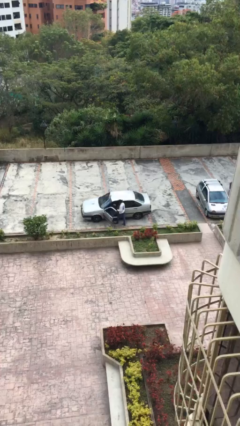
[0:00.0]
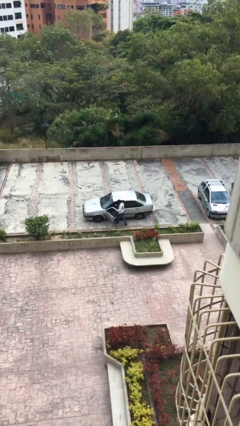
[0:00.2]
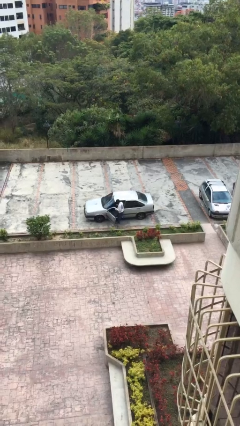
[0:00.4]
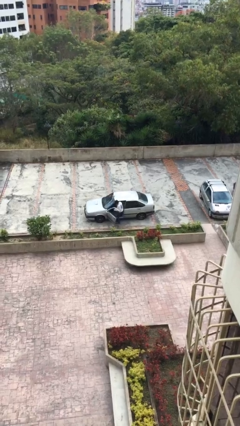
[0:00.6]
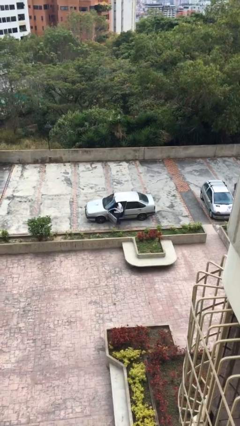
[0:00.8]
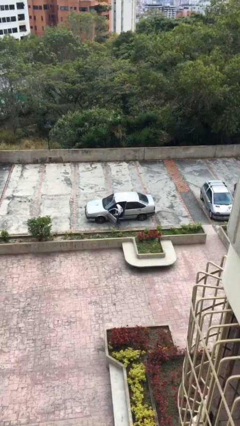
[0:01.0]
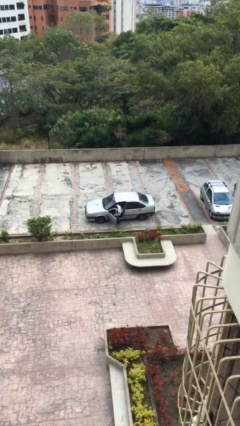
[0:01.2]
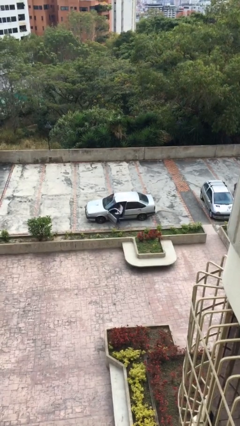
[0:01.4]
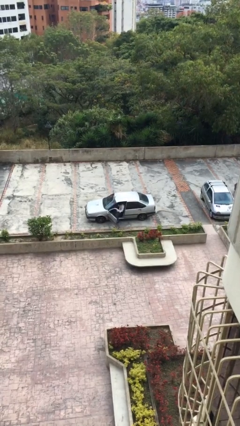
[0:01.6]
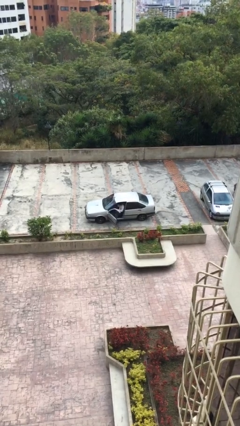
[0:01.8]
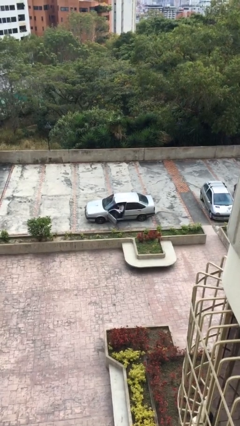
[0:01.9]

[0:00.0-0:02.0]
person enters car

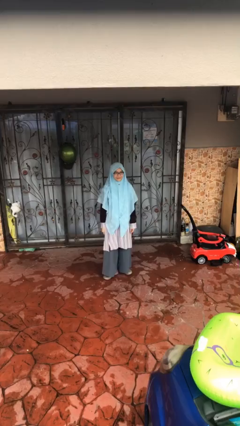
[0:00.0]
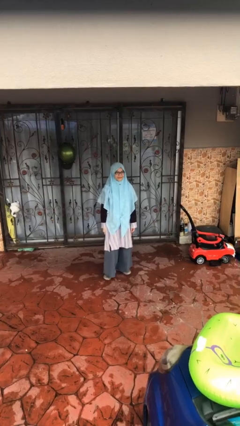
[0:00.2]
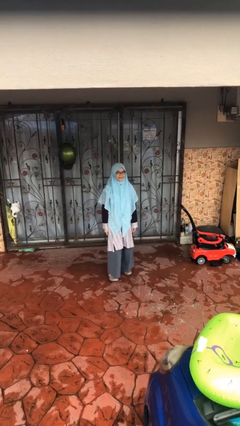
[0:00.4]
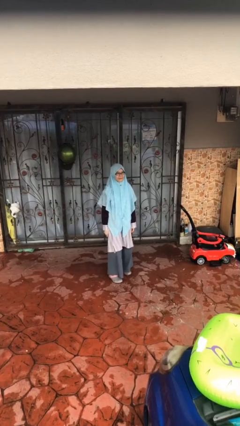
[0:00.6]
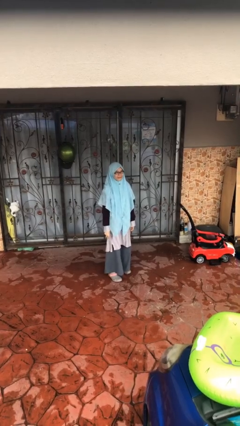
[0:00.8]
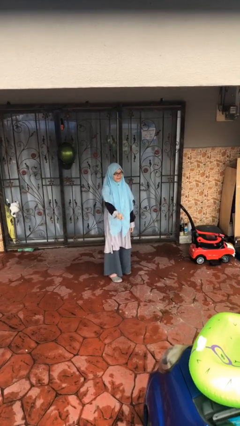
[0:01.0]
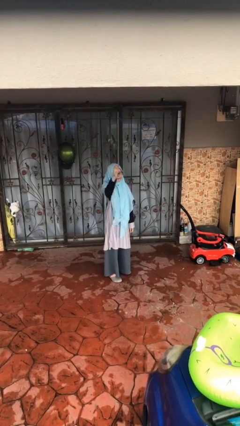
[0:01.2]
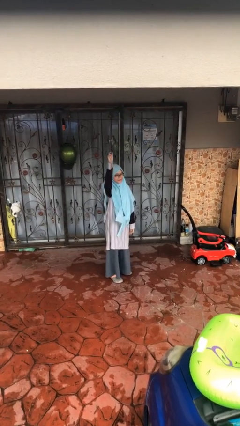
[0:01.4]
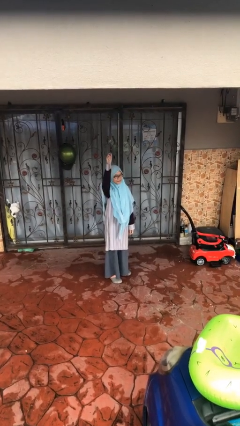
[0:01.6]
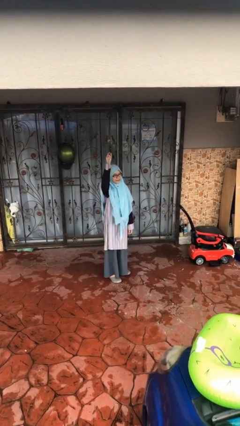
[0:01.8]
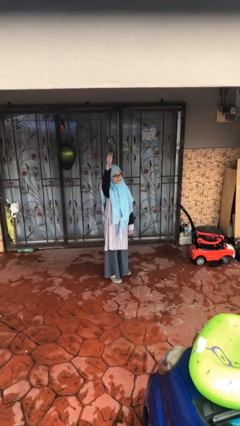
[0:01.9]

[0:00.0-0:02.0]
person gestures raise hand

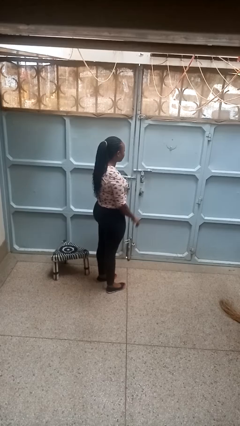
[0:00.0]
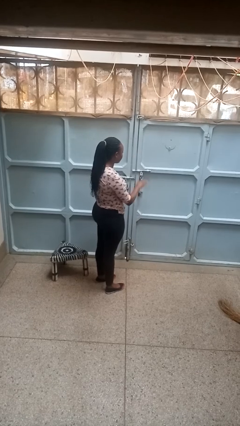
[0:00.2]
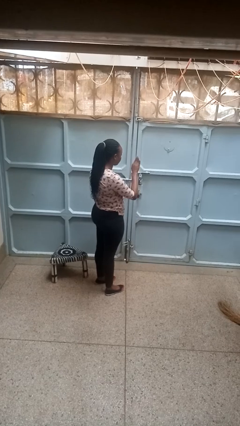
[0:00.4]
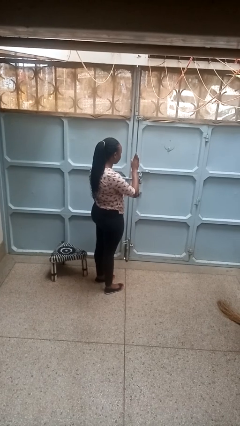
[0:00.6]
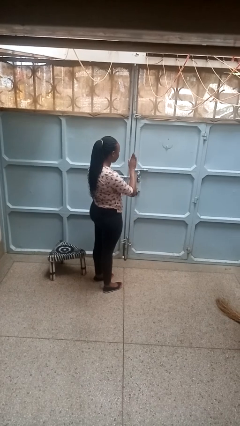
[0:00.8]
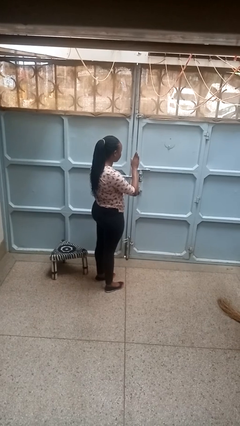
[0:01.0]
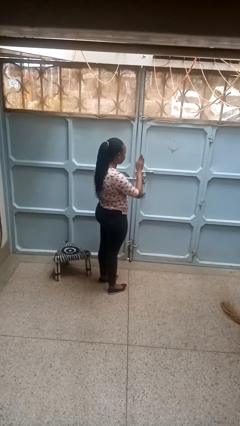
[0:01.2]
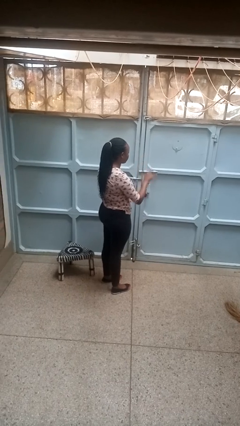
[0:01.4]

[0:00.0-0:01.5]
person gestures stop

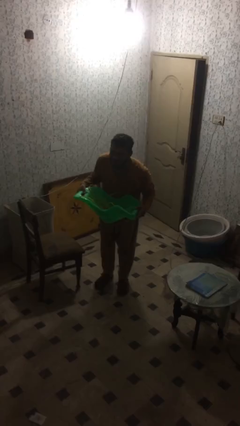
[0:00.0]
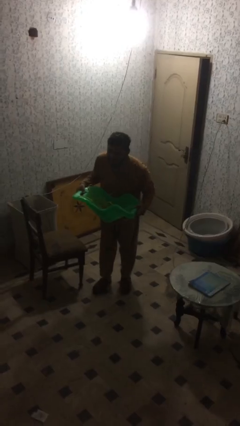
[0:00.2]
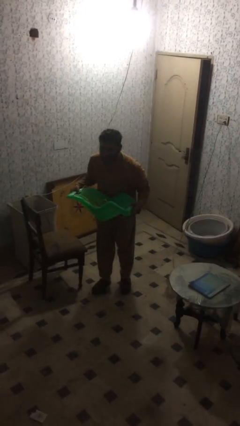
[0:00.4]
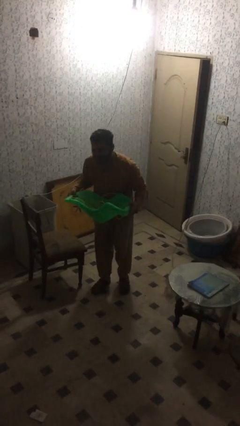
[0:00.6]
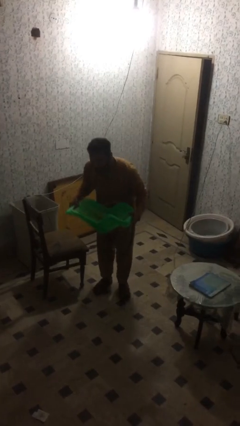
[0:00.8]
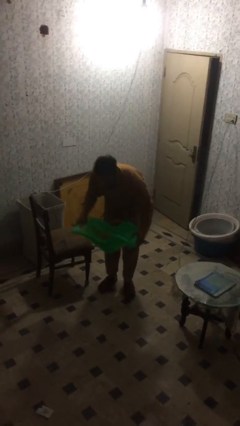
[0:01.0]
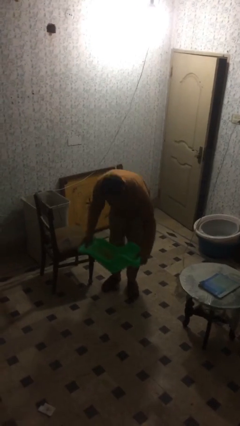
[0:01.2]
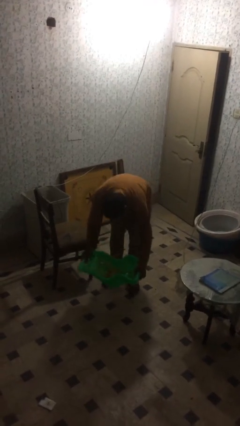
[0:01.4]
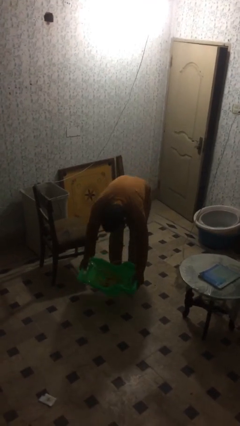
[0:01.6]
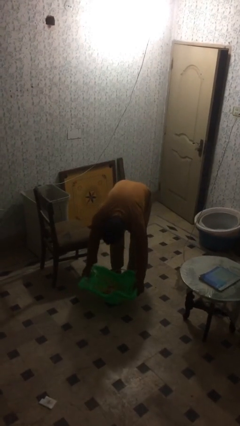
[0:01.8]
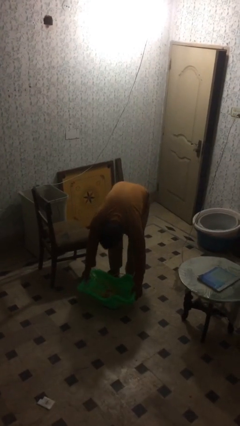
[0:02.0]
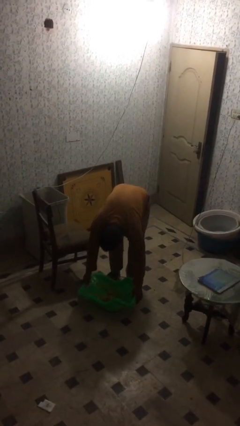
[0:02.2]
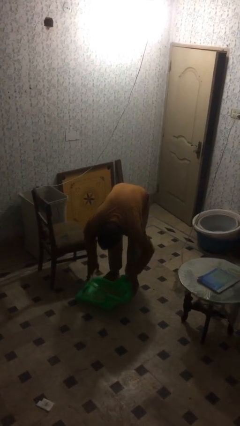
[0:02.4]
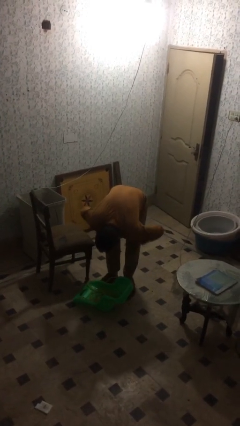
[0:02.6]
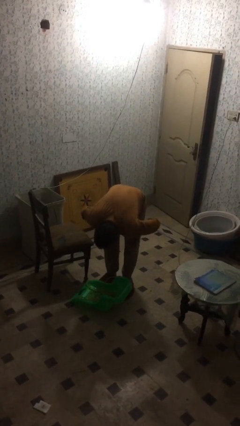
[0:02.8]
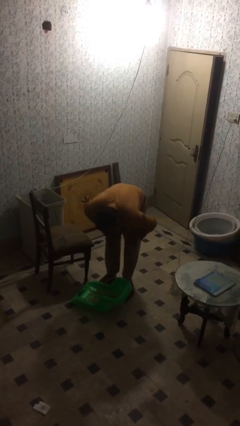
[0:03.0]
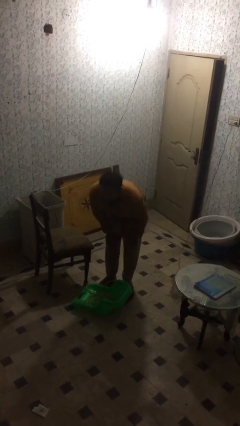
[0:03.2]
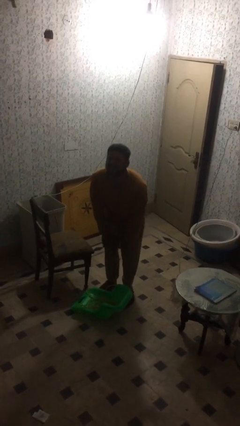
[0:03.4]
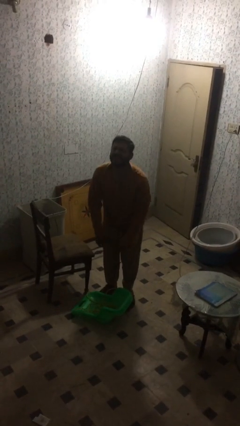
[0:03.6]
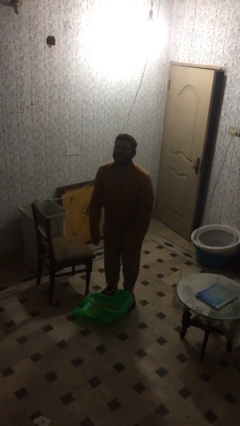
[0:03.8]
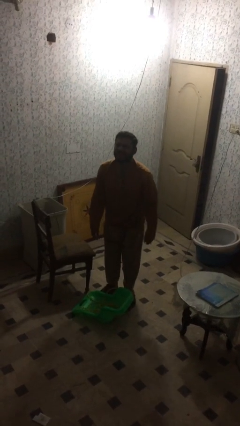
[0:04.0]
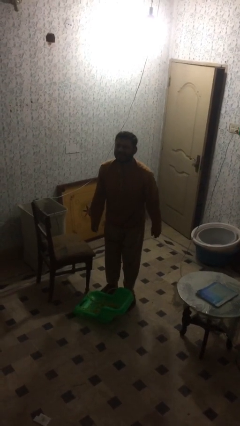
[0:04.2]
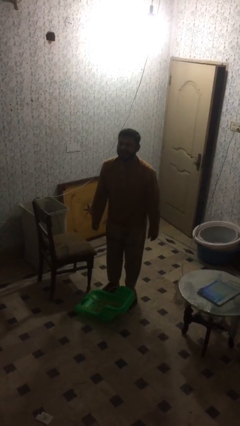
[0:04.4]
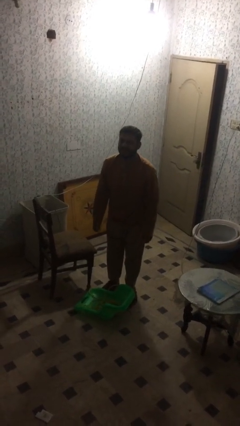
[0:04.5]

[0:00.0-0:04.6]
person puts down object on floor

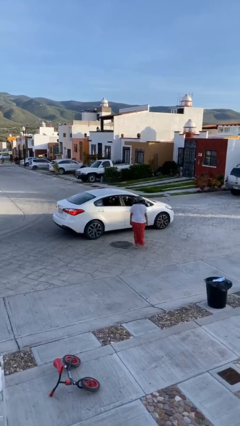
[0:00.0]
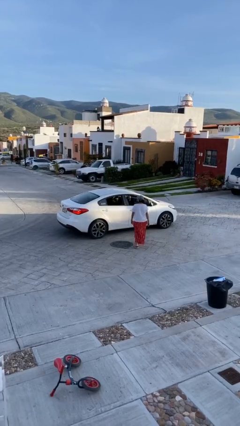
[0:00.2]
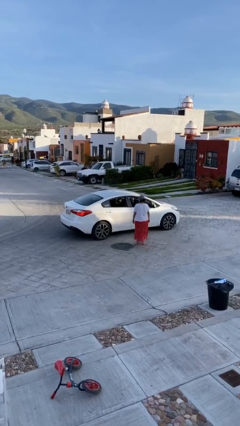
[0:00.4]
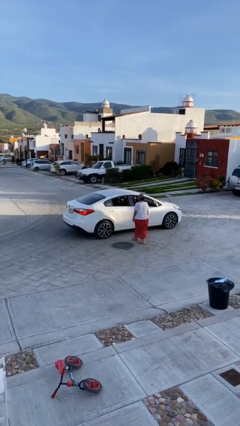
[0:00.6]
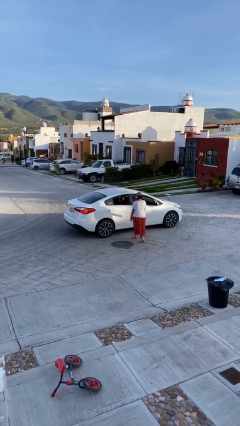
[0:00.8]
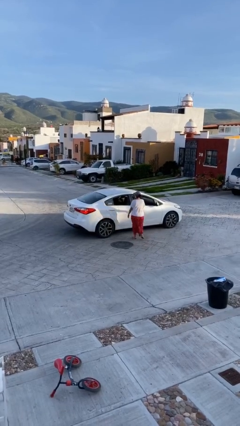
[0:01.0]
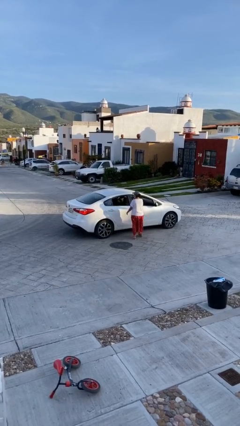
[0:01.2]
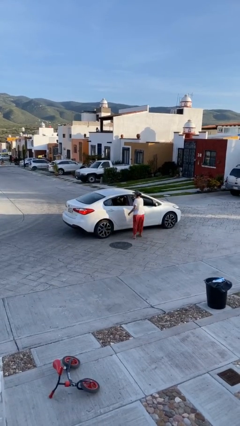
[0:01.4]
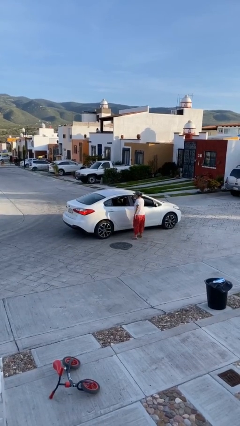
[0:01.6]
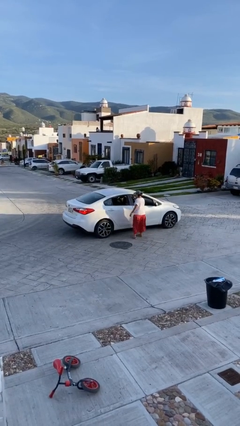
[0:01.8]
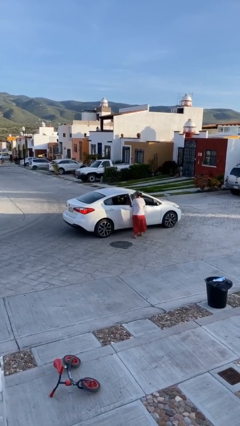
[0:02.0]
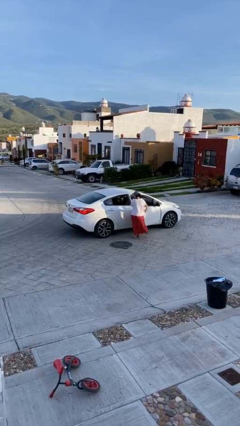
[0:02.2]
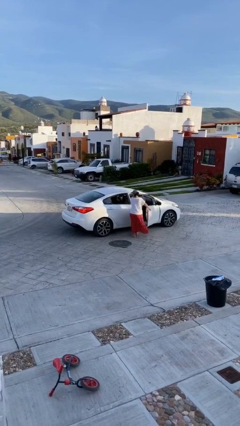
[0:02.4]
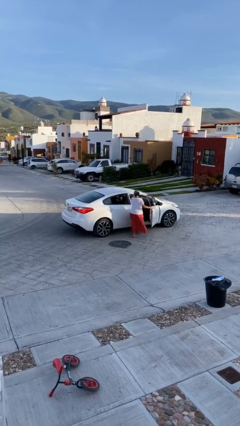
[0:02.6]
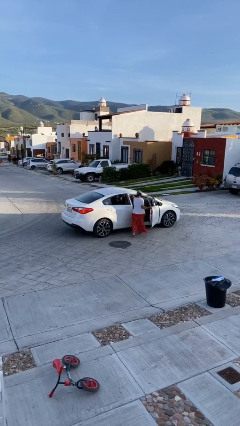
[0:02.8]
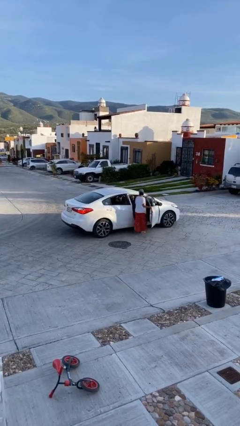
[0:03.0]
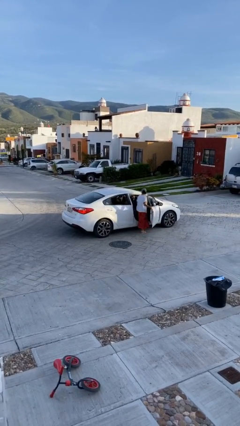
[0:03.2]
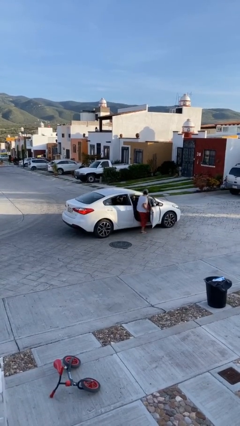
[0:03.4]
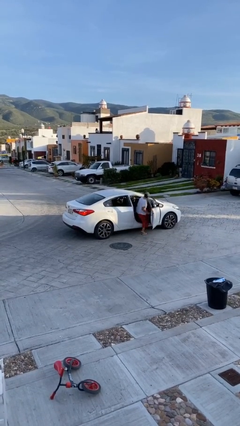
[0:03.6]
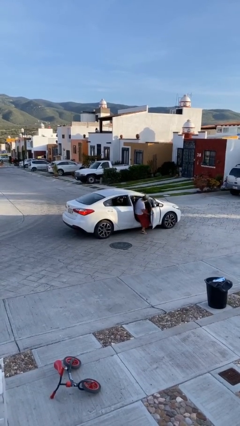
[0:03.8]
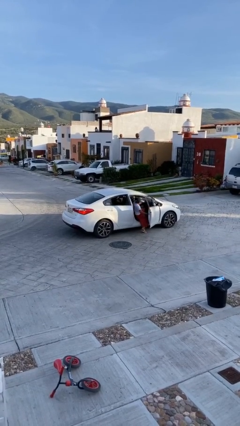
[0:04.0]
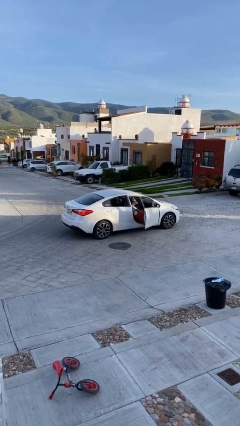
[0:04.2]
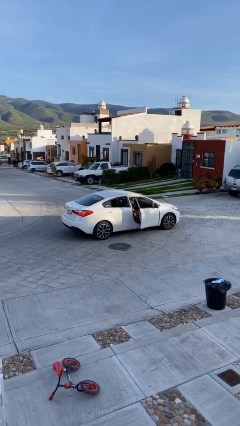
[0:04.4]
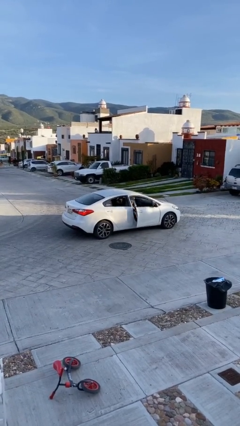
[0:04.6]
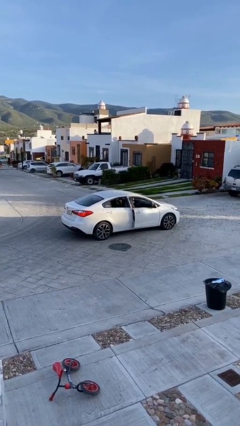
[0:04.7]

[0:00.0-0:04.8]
car picks up person

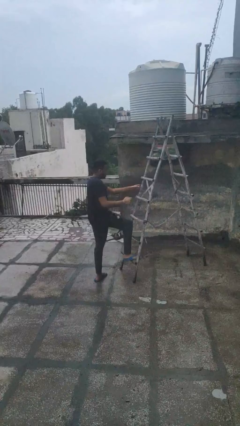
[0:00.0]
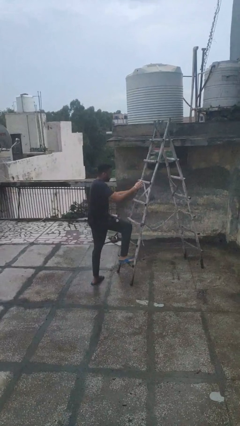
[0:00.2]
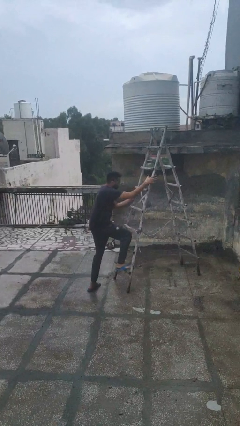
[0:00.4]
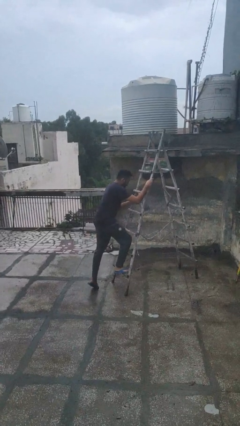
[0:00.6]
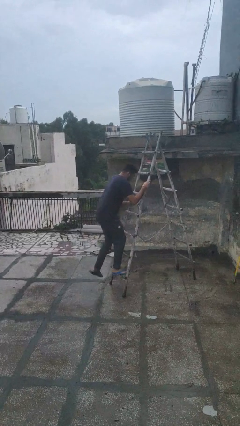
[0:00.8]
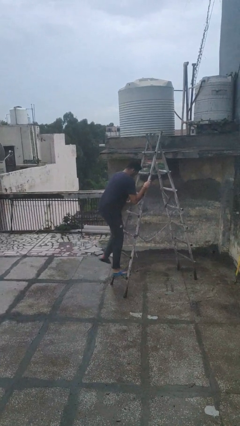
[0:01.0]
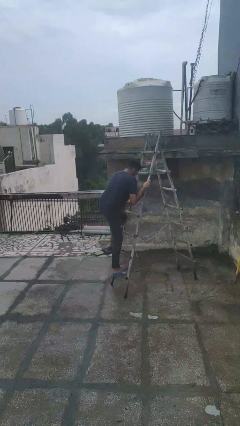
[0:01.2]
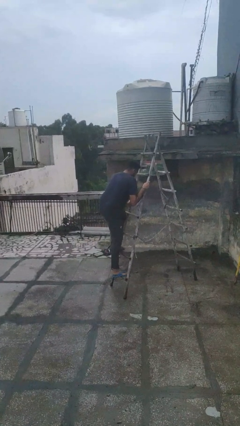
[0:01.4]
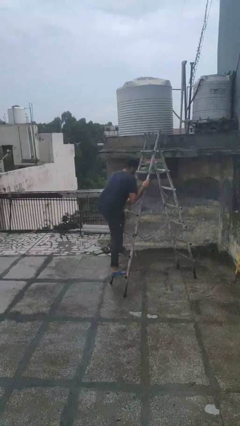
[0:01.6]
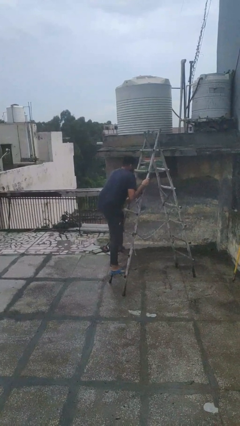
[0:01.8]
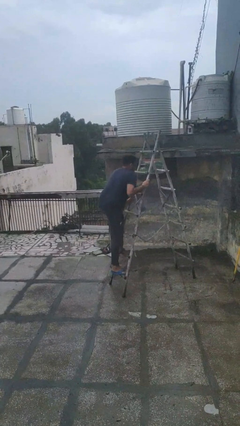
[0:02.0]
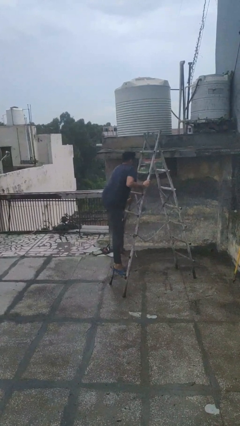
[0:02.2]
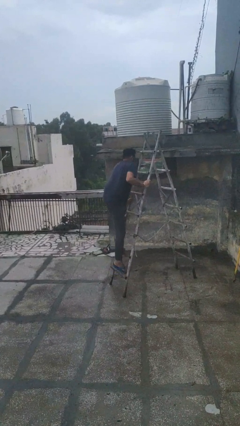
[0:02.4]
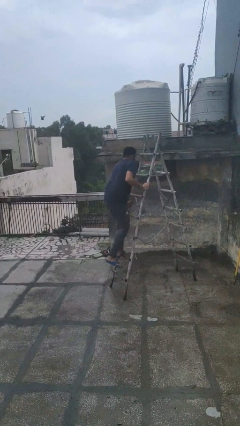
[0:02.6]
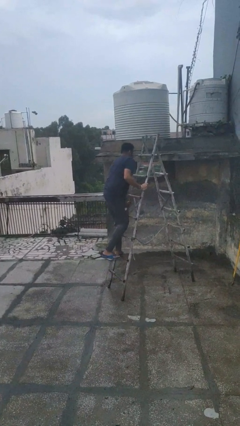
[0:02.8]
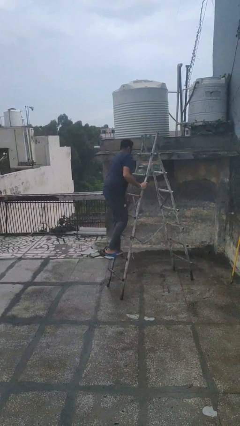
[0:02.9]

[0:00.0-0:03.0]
person climbs up ladder
